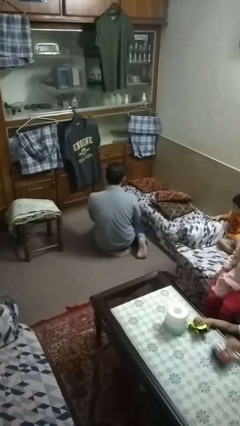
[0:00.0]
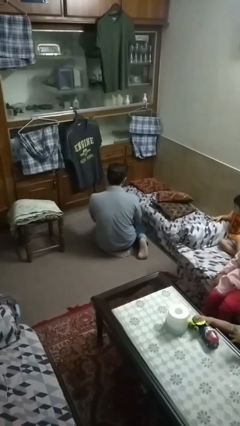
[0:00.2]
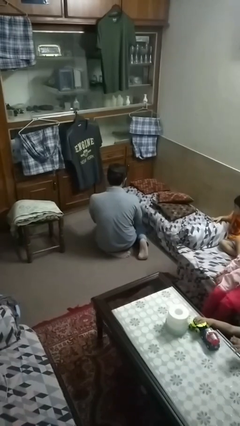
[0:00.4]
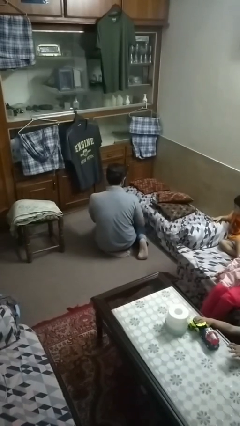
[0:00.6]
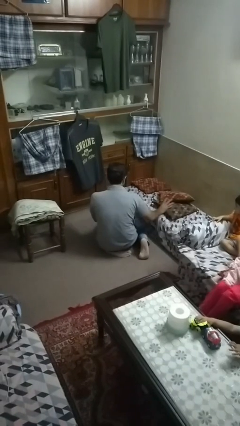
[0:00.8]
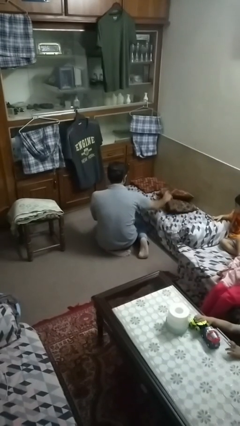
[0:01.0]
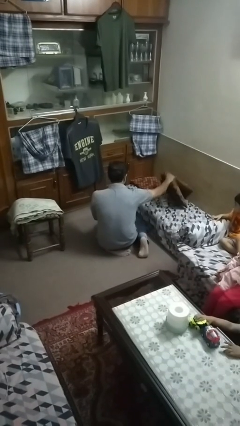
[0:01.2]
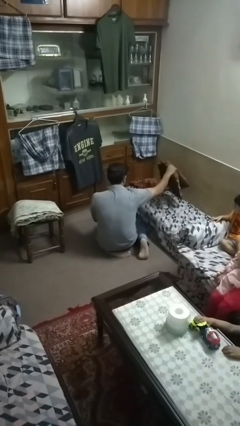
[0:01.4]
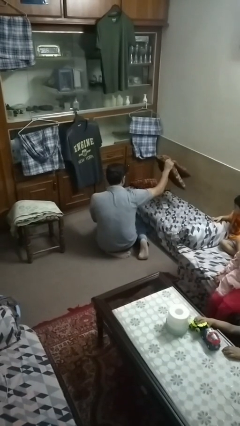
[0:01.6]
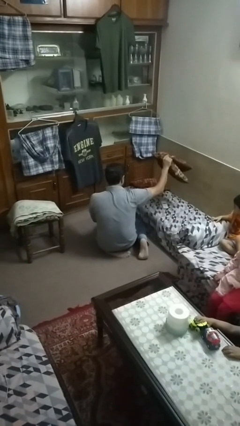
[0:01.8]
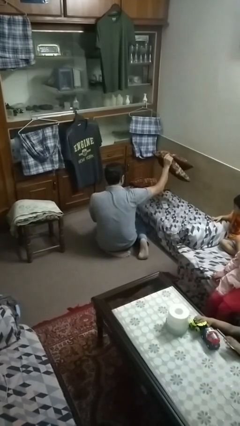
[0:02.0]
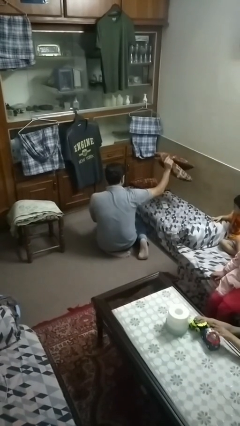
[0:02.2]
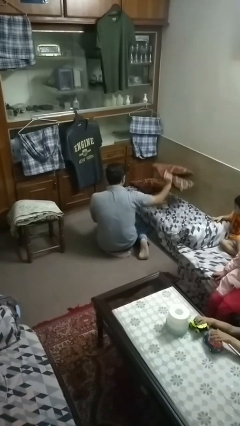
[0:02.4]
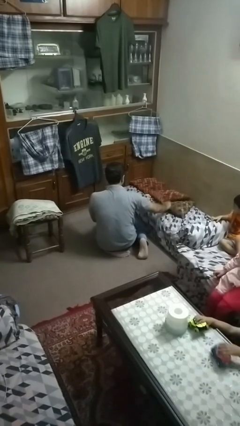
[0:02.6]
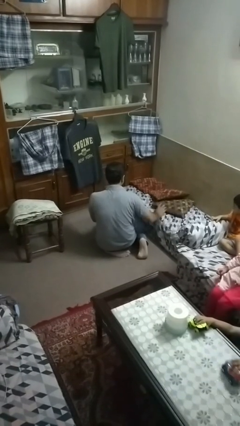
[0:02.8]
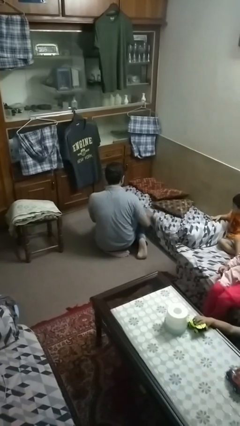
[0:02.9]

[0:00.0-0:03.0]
person searches in couch

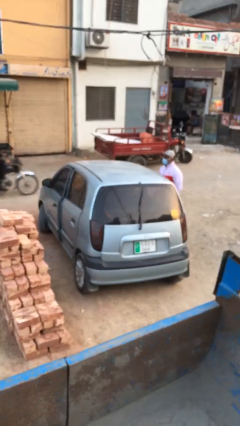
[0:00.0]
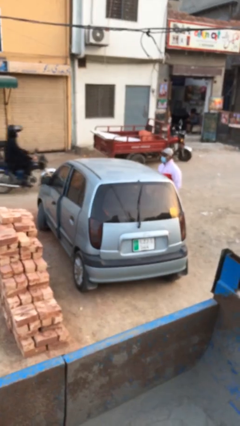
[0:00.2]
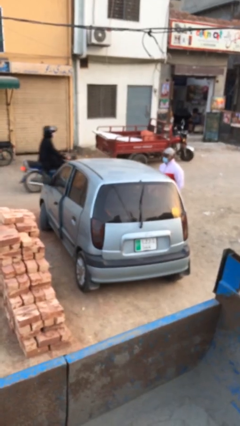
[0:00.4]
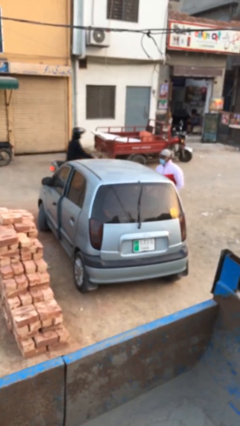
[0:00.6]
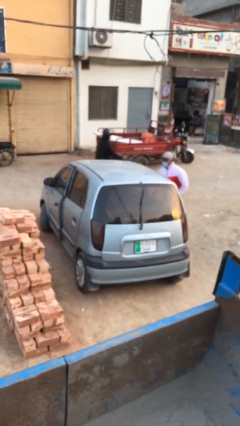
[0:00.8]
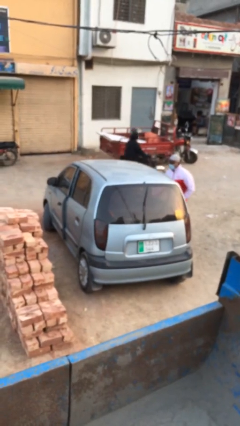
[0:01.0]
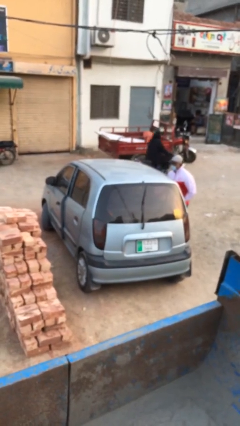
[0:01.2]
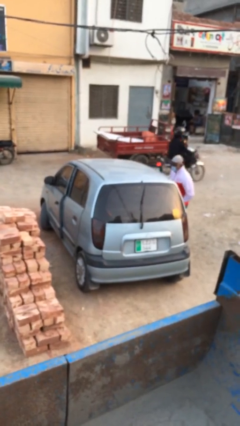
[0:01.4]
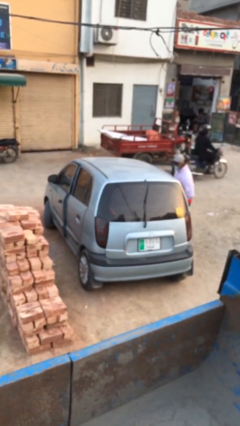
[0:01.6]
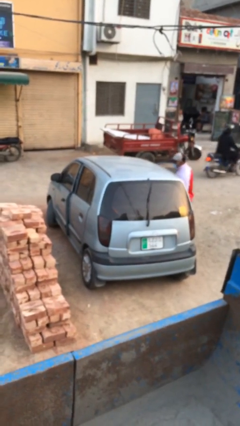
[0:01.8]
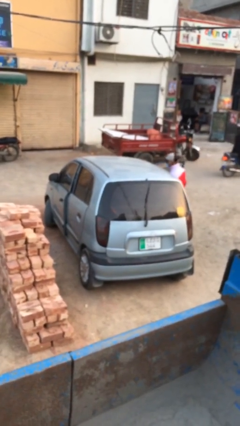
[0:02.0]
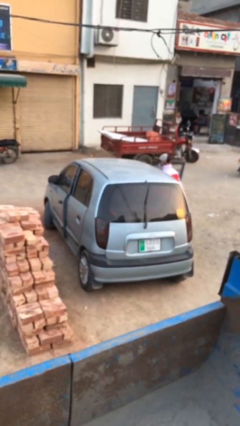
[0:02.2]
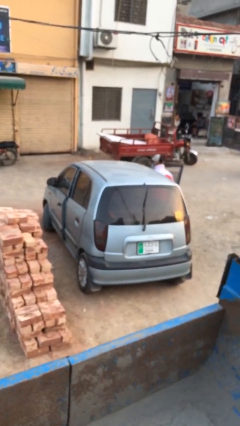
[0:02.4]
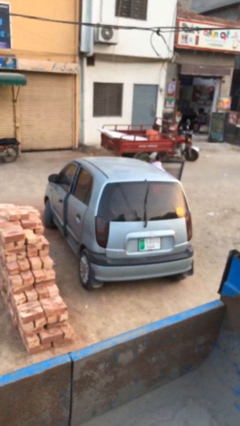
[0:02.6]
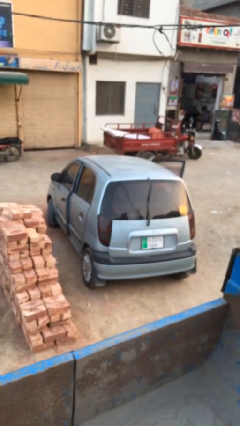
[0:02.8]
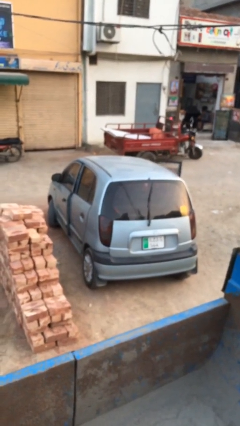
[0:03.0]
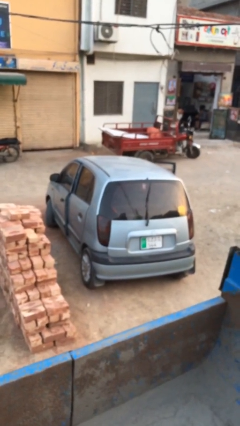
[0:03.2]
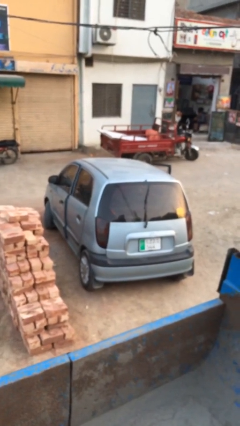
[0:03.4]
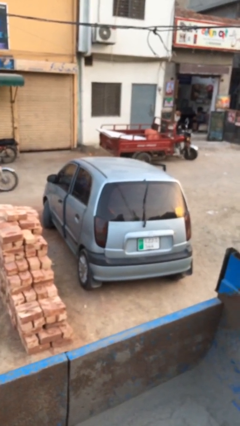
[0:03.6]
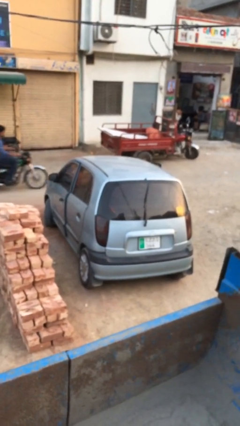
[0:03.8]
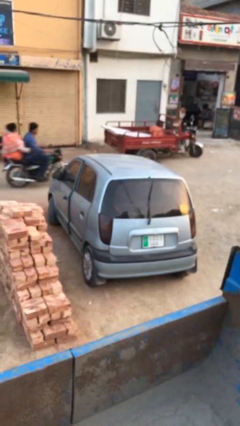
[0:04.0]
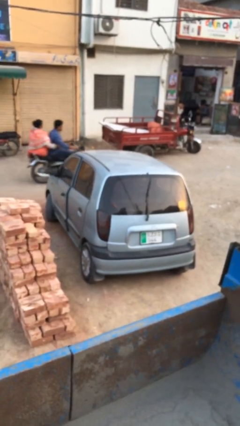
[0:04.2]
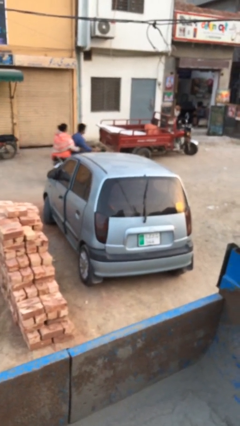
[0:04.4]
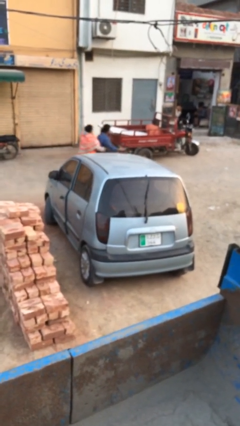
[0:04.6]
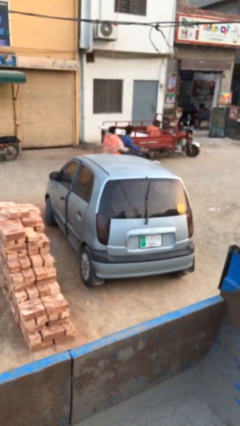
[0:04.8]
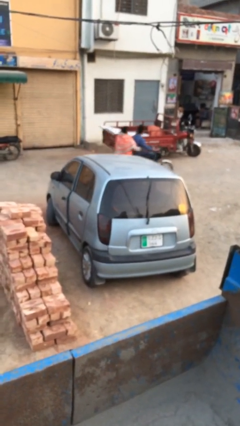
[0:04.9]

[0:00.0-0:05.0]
car picks up person

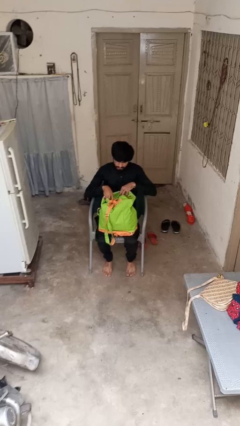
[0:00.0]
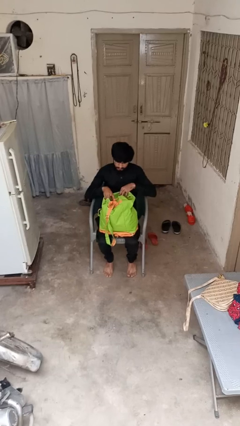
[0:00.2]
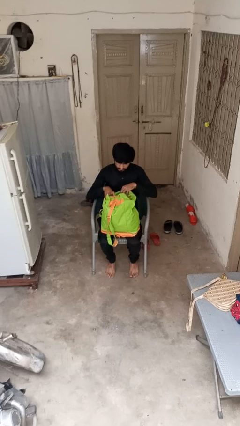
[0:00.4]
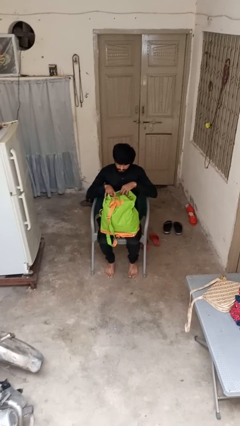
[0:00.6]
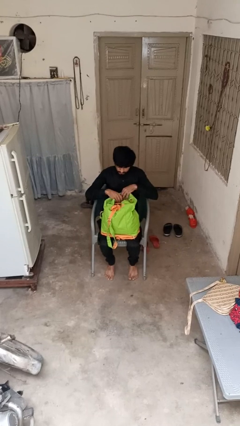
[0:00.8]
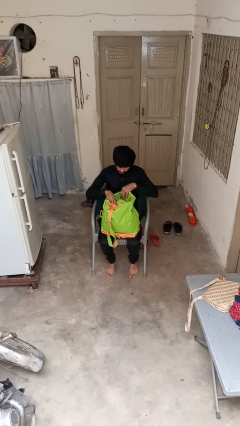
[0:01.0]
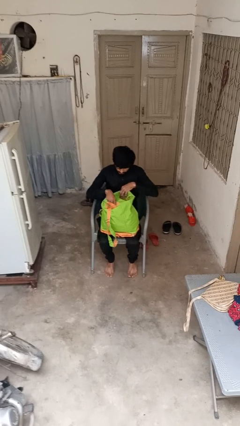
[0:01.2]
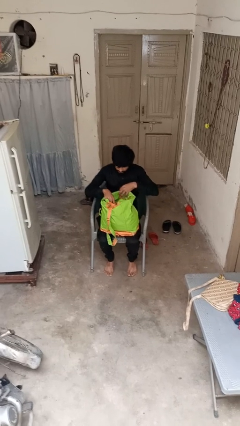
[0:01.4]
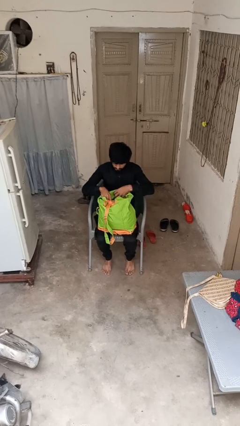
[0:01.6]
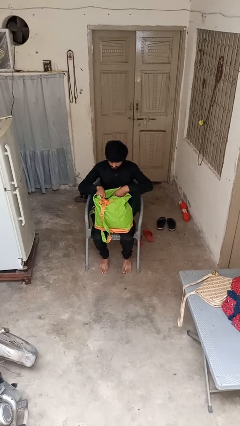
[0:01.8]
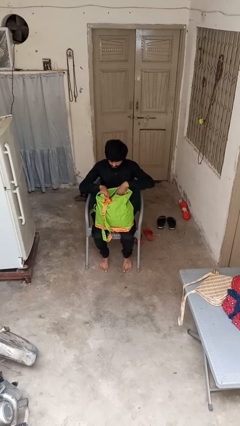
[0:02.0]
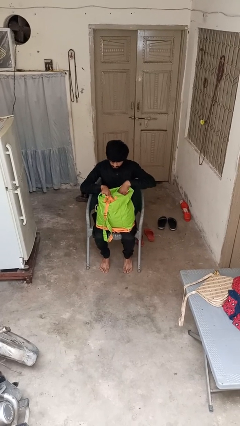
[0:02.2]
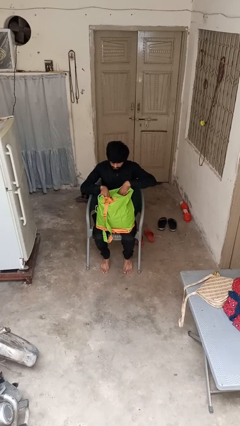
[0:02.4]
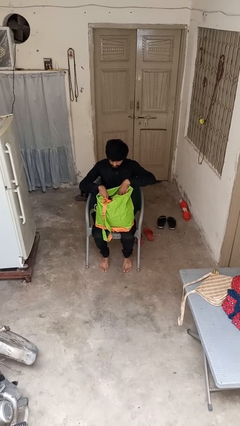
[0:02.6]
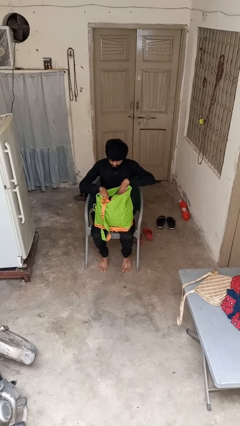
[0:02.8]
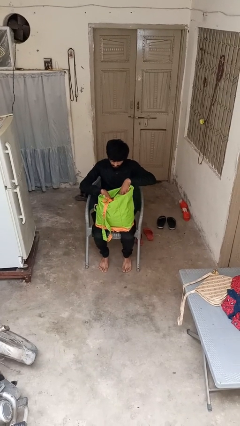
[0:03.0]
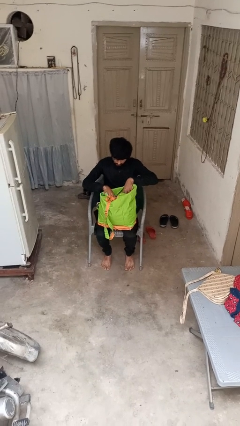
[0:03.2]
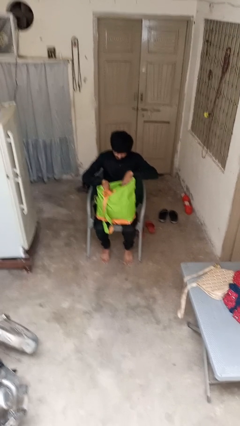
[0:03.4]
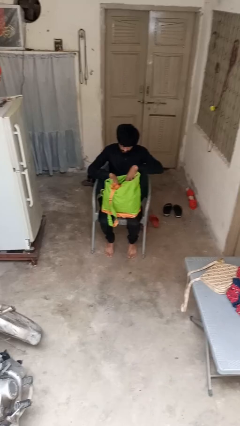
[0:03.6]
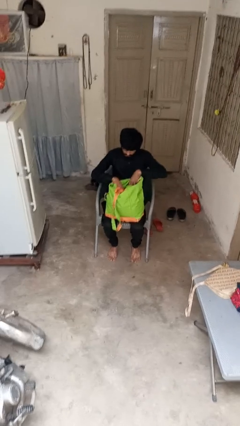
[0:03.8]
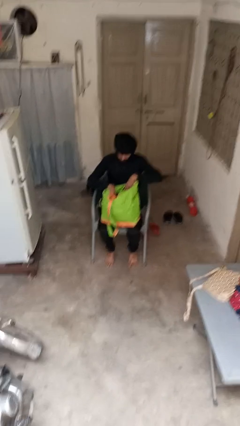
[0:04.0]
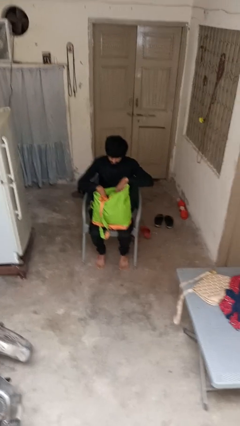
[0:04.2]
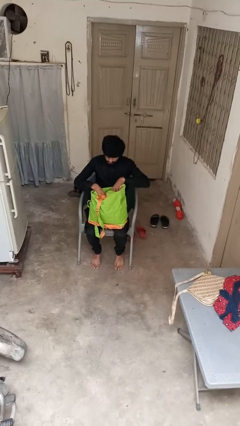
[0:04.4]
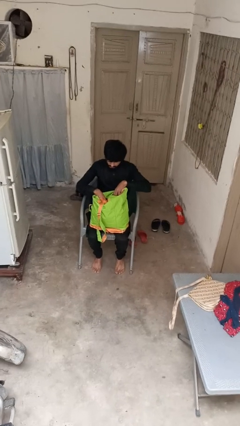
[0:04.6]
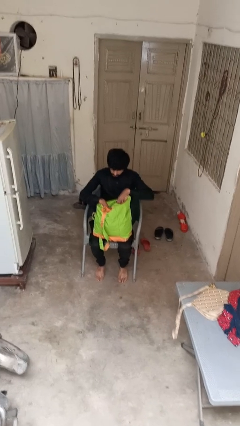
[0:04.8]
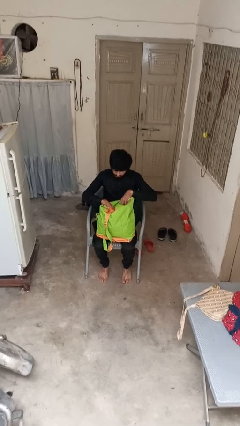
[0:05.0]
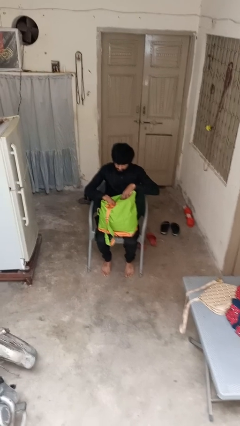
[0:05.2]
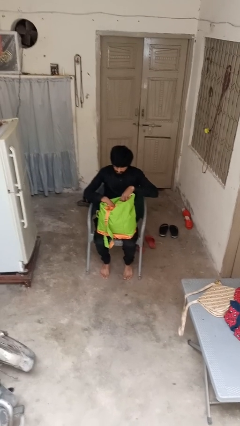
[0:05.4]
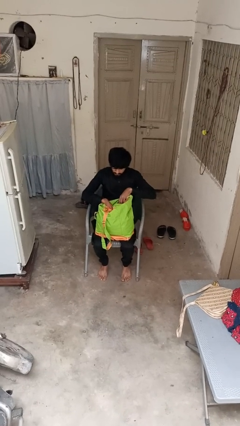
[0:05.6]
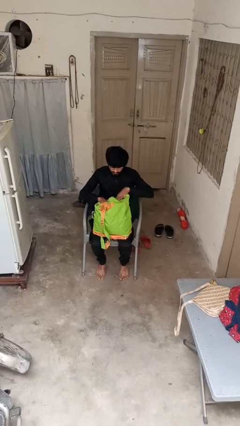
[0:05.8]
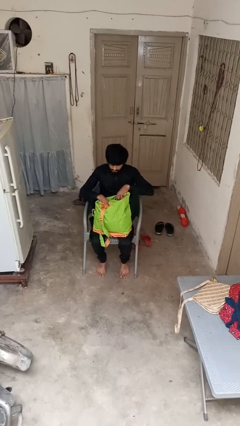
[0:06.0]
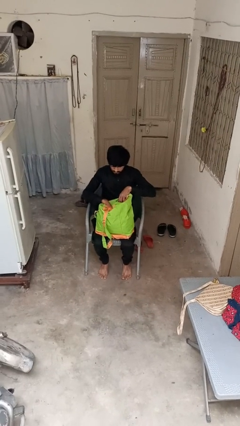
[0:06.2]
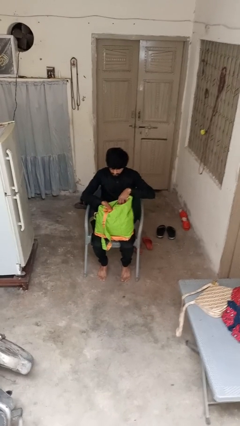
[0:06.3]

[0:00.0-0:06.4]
person searches in backpack

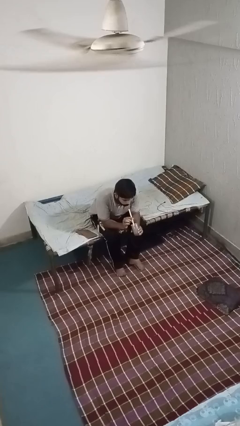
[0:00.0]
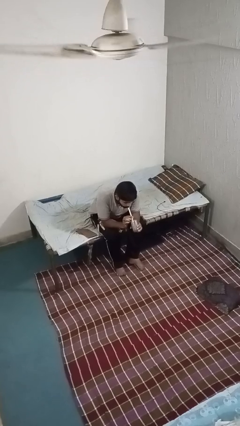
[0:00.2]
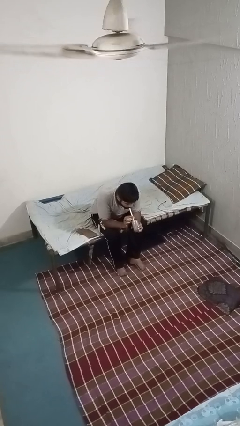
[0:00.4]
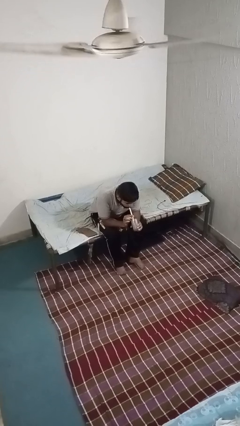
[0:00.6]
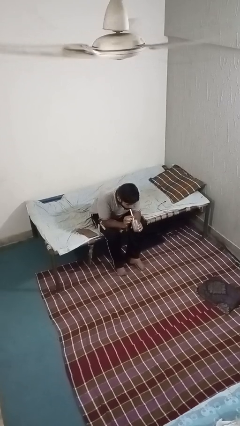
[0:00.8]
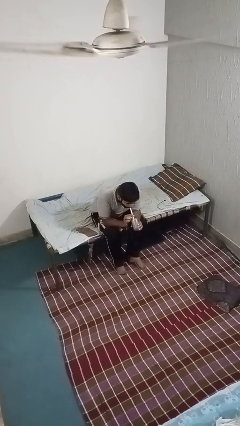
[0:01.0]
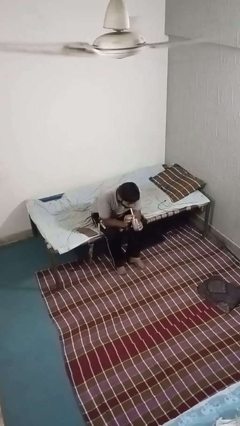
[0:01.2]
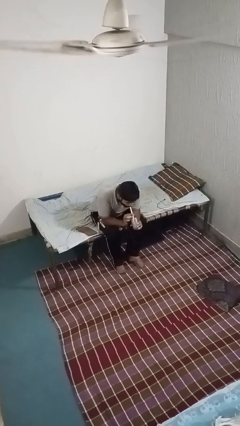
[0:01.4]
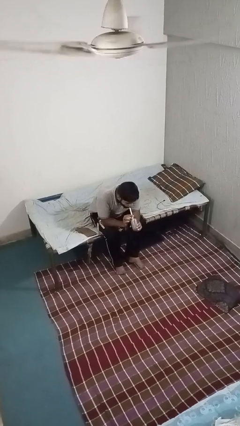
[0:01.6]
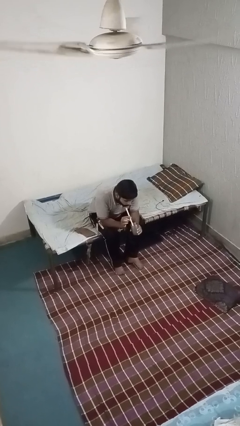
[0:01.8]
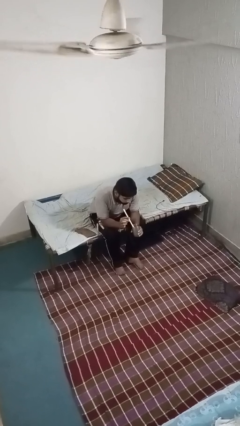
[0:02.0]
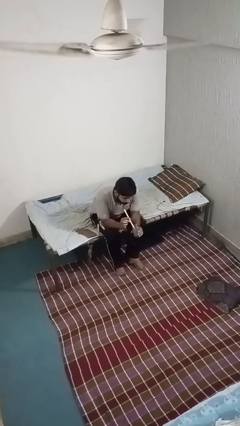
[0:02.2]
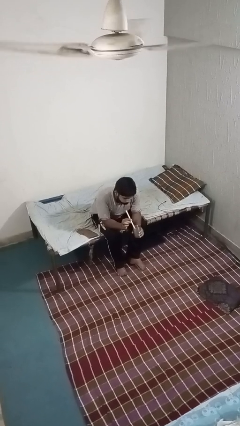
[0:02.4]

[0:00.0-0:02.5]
person drinks from straw

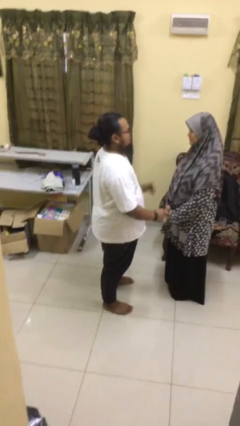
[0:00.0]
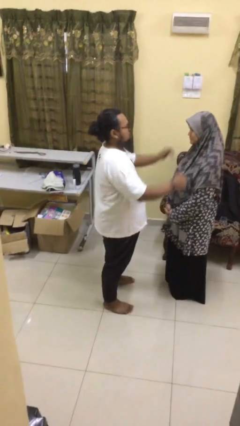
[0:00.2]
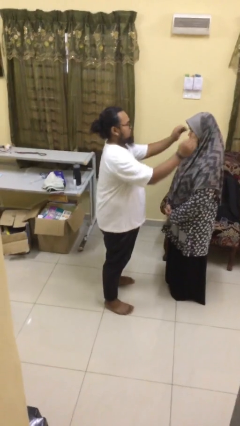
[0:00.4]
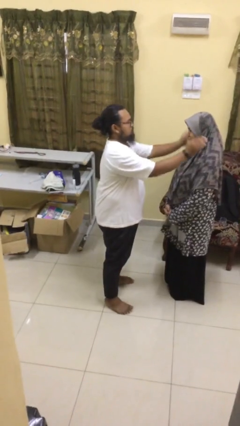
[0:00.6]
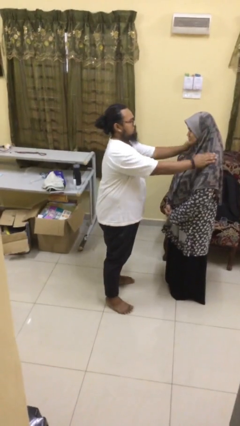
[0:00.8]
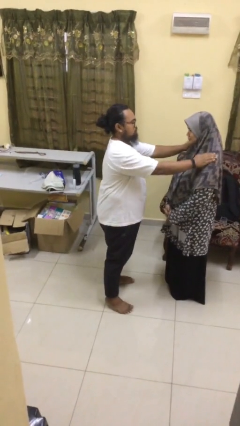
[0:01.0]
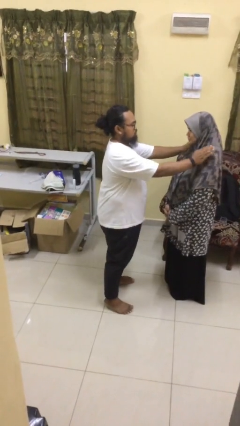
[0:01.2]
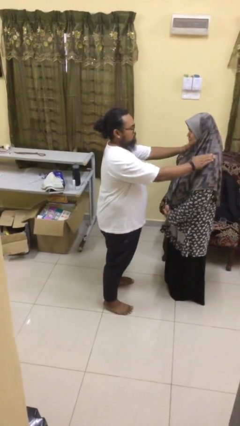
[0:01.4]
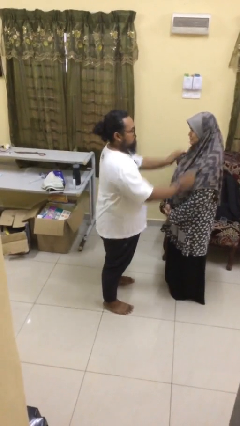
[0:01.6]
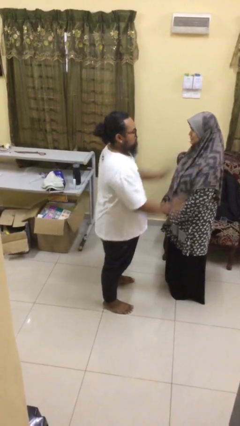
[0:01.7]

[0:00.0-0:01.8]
person pounds shoulders of person
